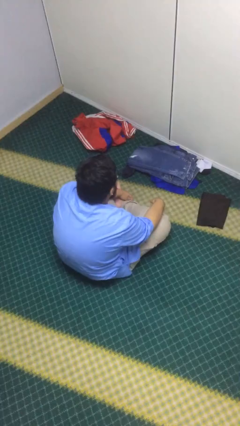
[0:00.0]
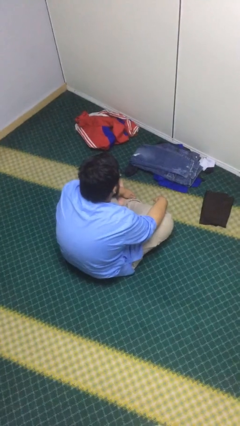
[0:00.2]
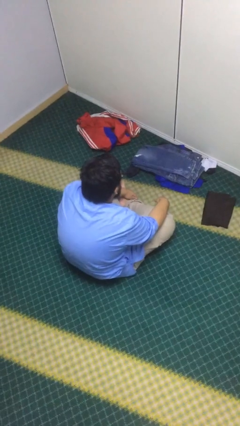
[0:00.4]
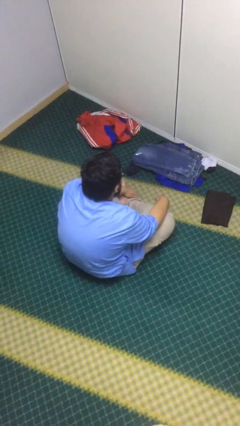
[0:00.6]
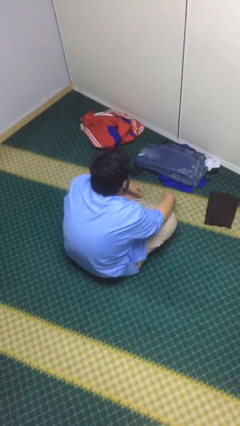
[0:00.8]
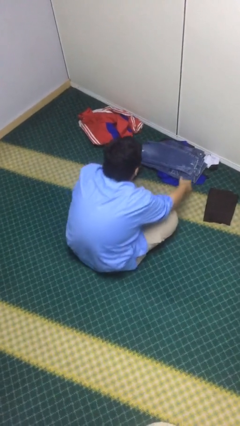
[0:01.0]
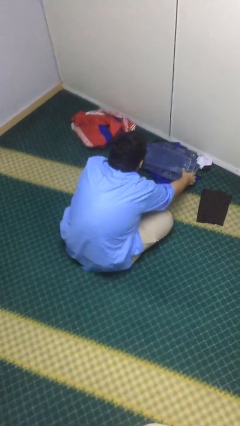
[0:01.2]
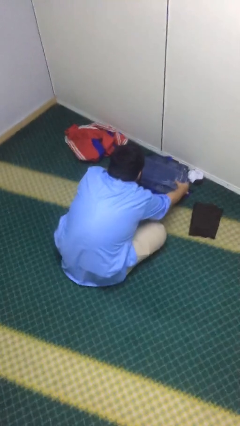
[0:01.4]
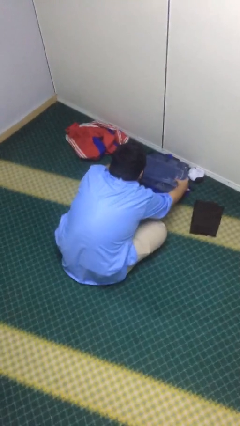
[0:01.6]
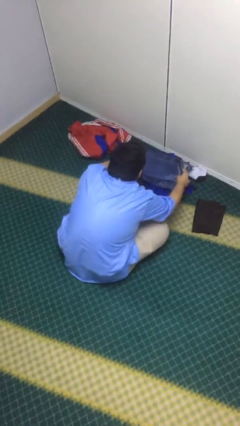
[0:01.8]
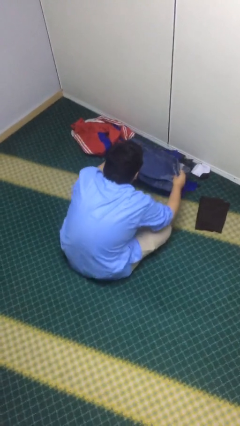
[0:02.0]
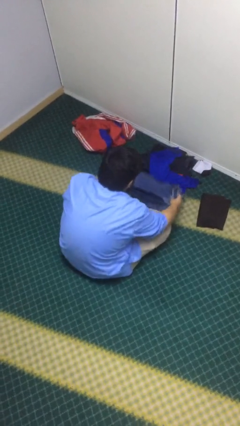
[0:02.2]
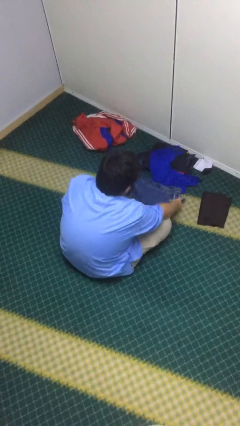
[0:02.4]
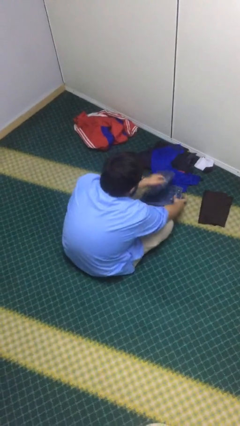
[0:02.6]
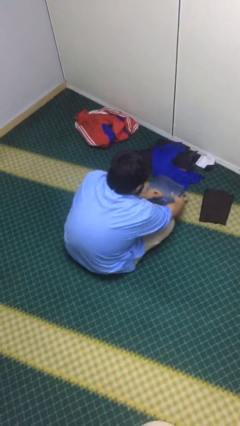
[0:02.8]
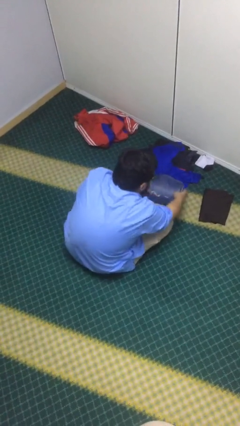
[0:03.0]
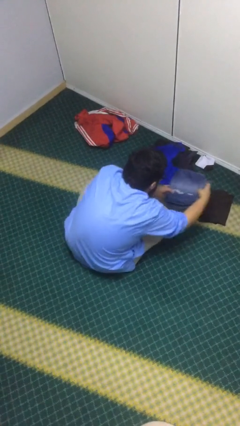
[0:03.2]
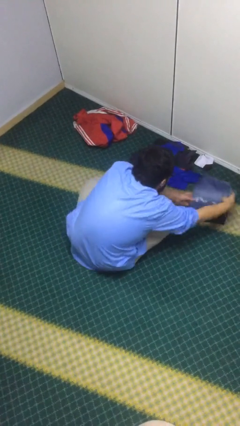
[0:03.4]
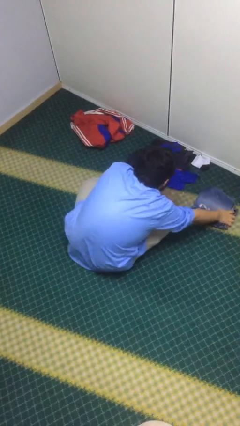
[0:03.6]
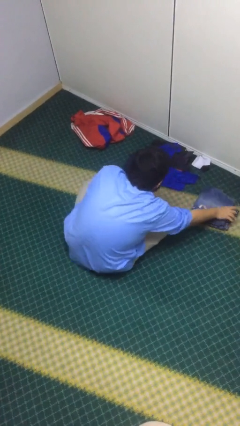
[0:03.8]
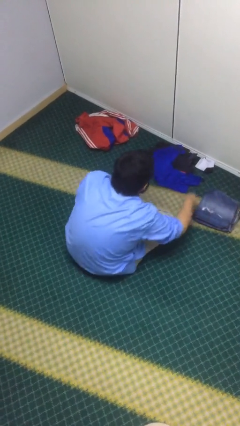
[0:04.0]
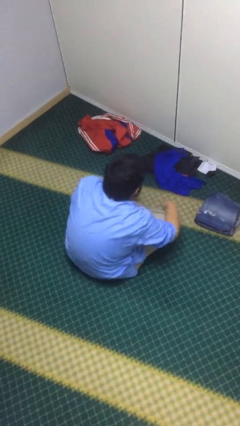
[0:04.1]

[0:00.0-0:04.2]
person folds pants

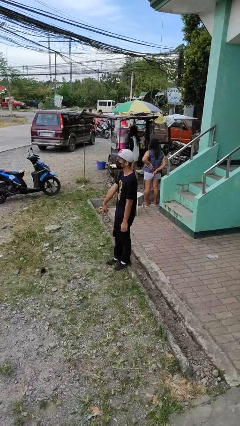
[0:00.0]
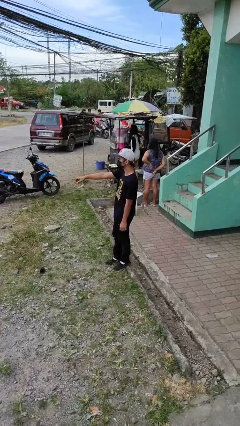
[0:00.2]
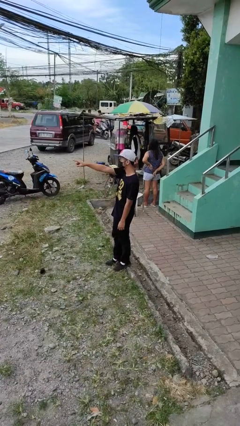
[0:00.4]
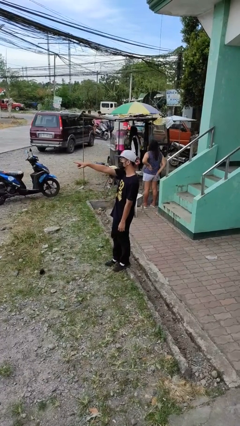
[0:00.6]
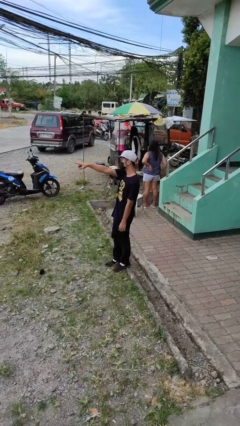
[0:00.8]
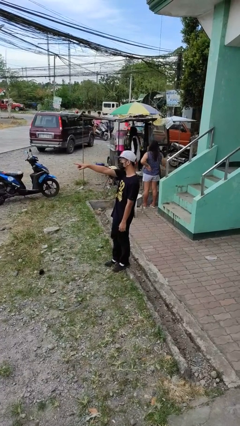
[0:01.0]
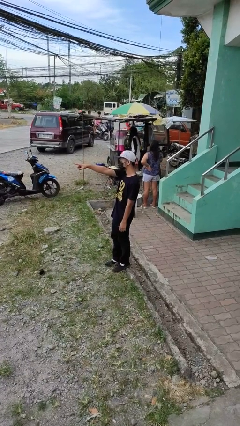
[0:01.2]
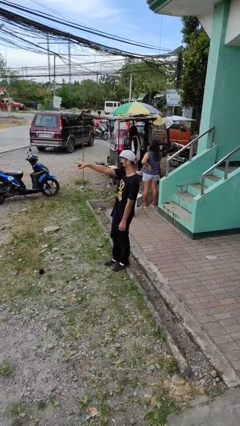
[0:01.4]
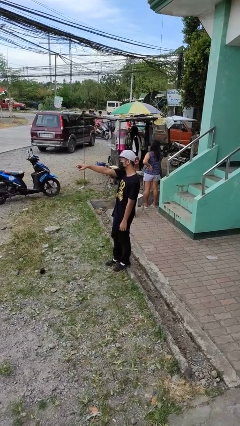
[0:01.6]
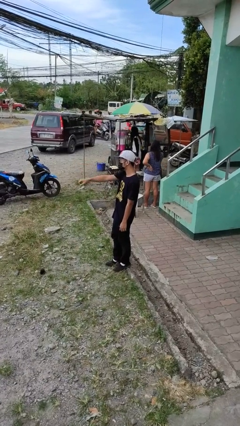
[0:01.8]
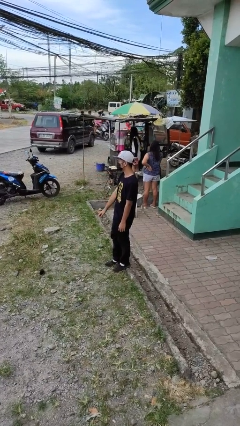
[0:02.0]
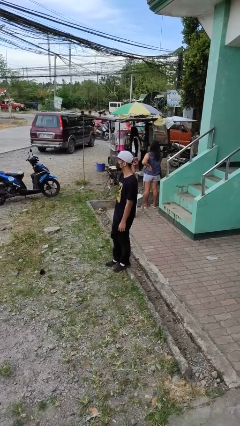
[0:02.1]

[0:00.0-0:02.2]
person points at person

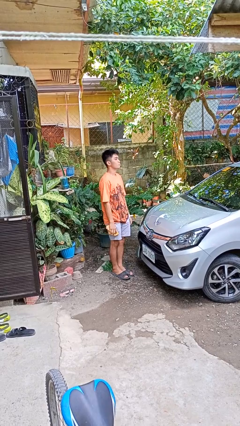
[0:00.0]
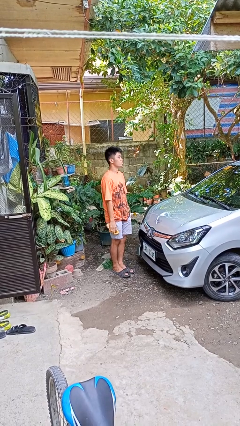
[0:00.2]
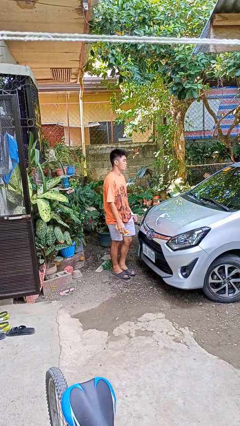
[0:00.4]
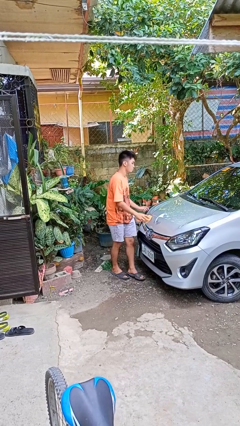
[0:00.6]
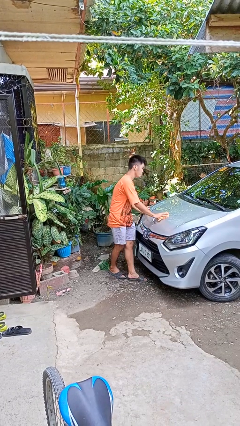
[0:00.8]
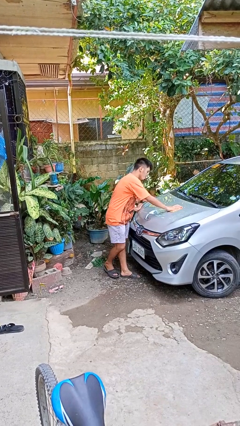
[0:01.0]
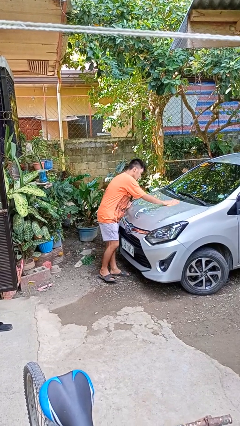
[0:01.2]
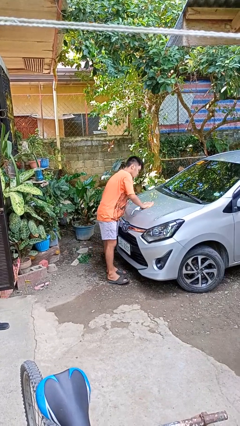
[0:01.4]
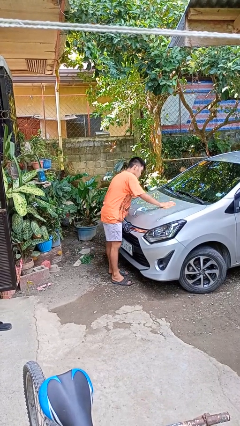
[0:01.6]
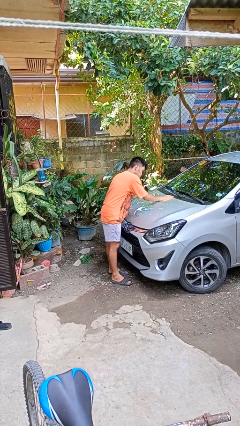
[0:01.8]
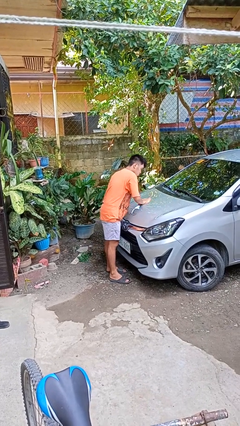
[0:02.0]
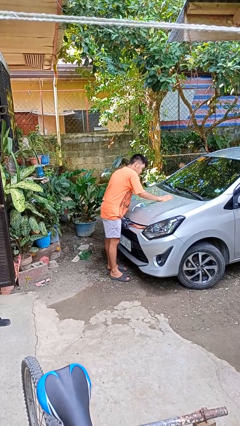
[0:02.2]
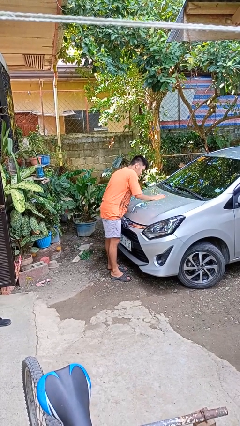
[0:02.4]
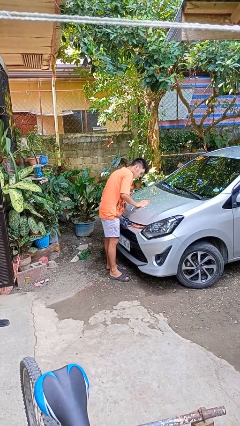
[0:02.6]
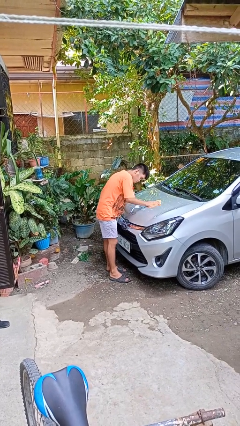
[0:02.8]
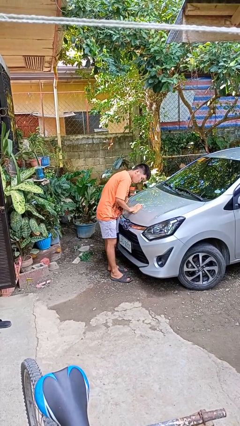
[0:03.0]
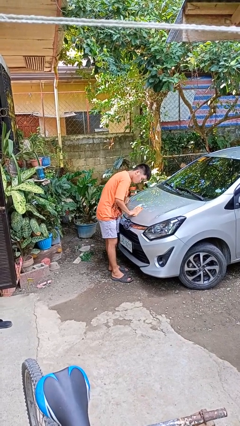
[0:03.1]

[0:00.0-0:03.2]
person polishes car with rag

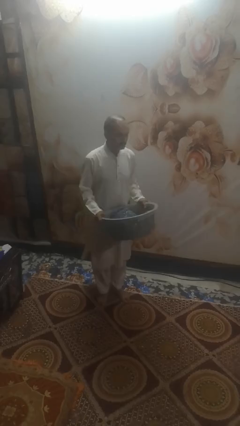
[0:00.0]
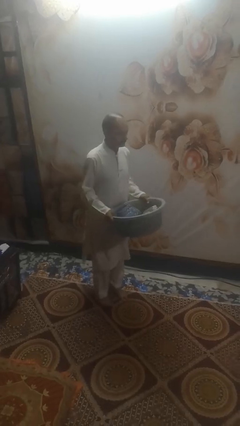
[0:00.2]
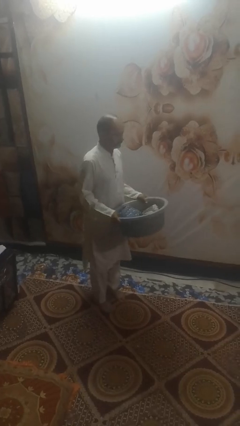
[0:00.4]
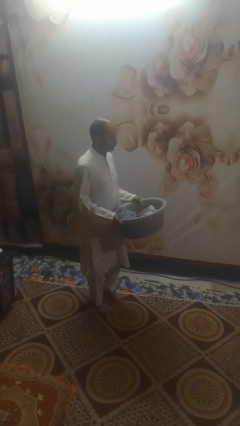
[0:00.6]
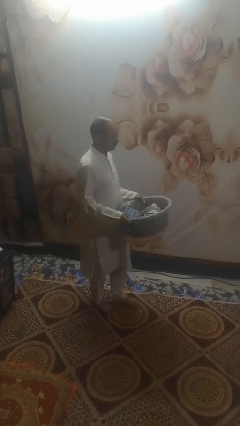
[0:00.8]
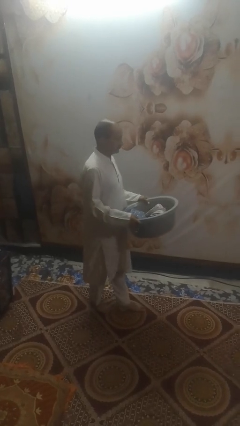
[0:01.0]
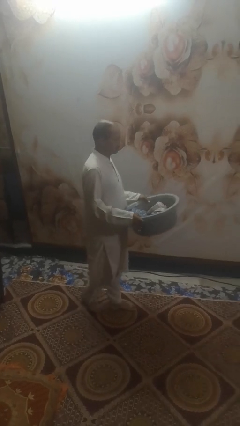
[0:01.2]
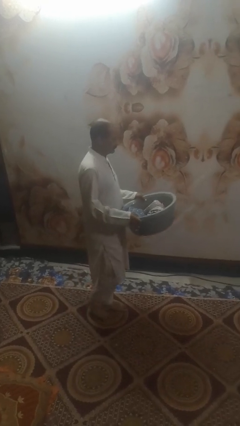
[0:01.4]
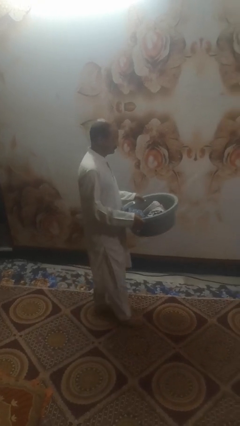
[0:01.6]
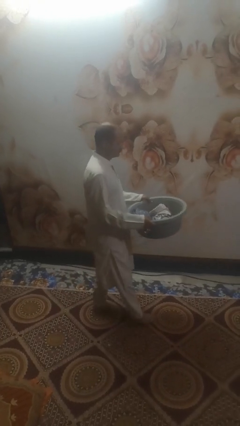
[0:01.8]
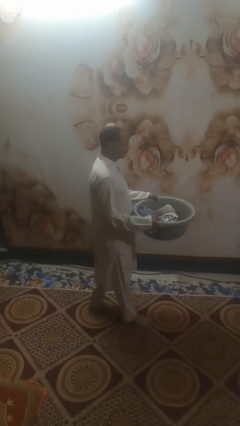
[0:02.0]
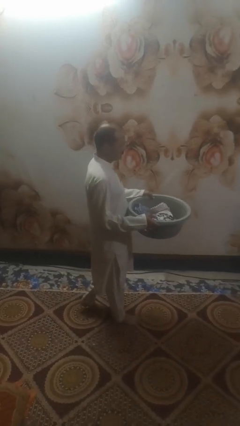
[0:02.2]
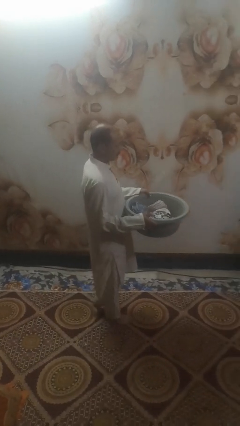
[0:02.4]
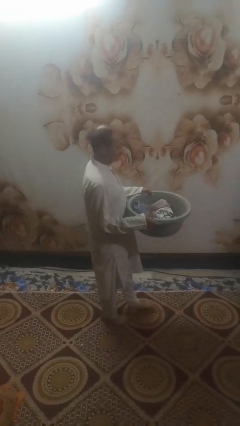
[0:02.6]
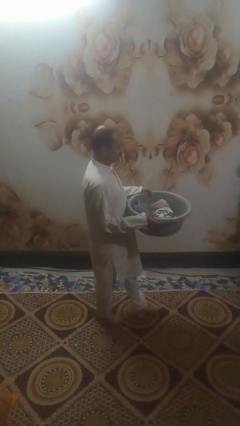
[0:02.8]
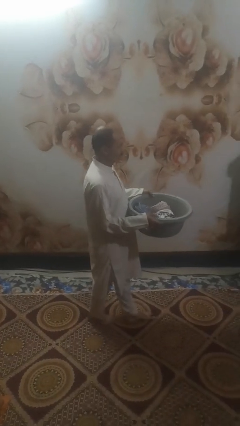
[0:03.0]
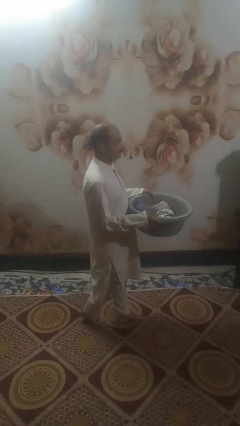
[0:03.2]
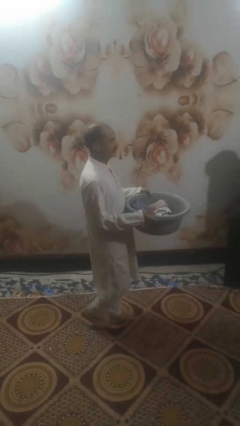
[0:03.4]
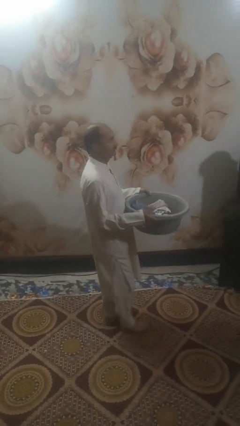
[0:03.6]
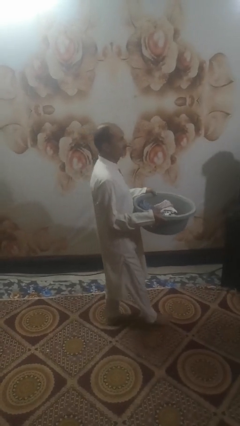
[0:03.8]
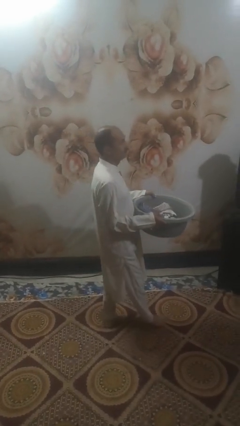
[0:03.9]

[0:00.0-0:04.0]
person carries laundry basket

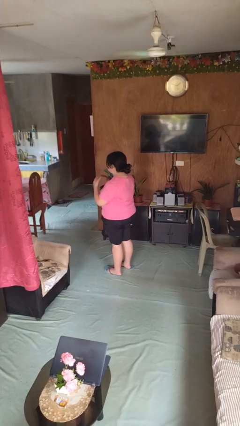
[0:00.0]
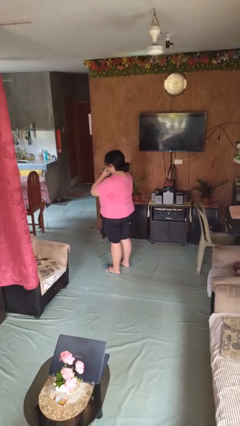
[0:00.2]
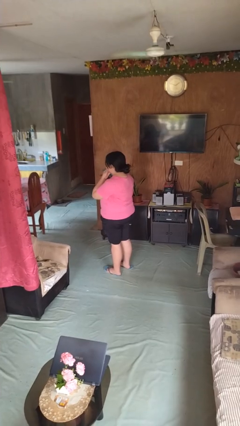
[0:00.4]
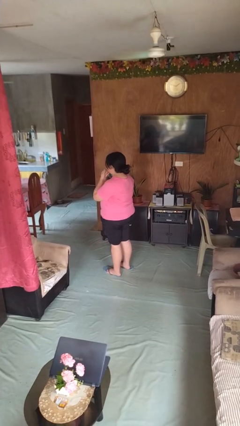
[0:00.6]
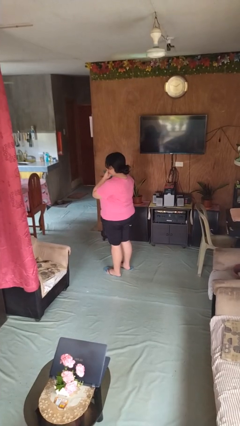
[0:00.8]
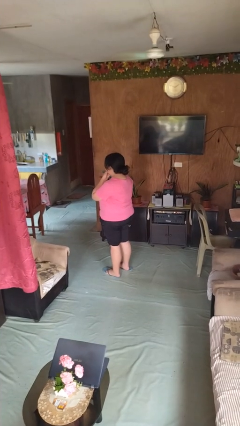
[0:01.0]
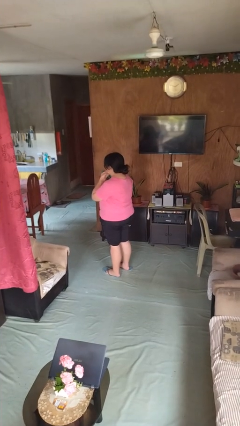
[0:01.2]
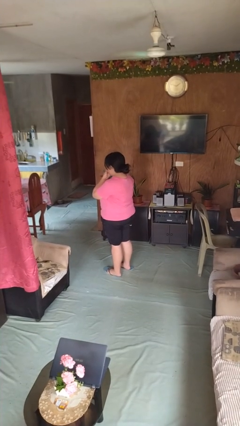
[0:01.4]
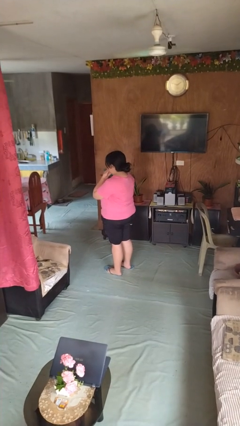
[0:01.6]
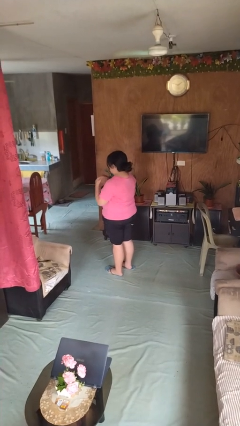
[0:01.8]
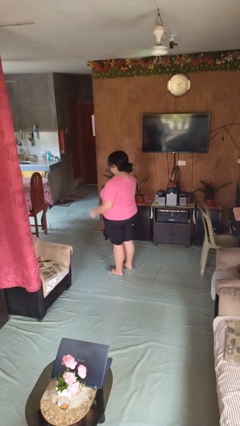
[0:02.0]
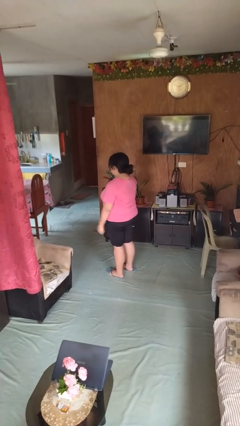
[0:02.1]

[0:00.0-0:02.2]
person strokes chin

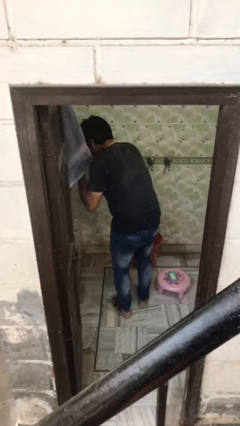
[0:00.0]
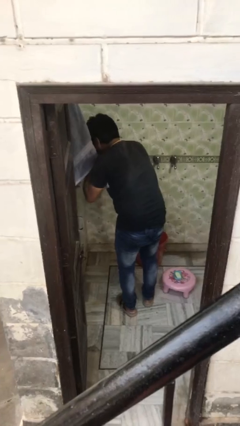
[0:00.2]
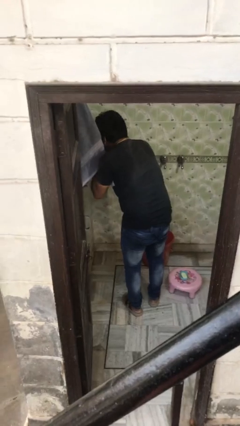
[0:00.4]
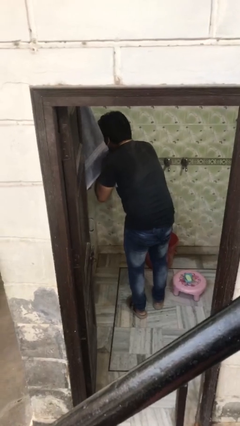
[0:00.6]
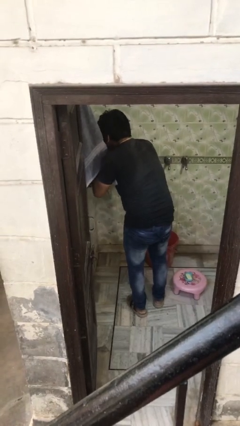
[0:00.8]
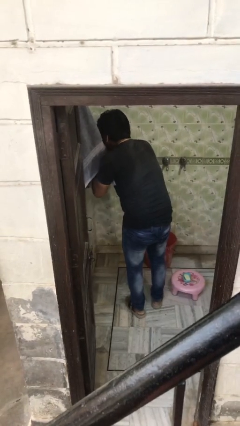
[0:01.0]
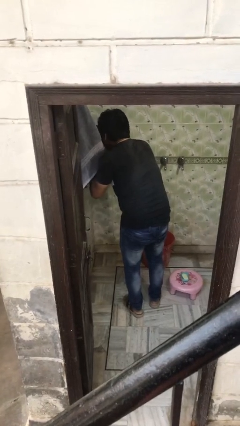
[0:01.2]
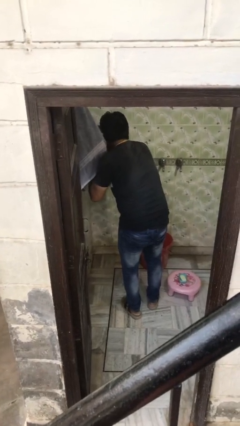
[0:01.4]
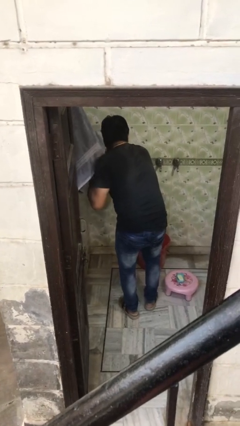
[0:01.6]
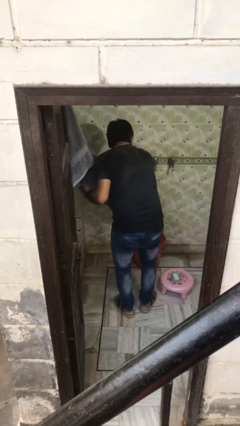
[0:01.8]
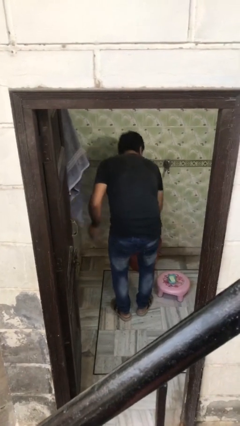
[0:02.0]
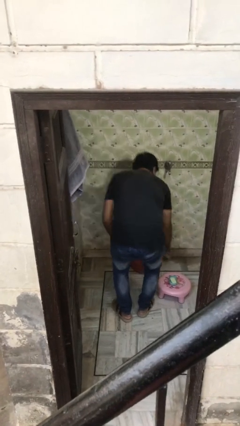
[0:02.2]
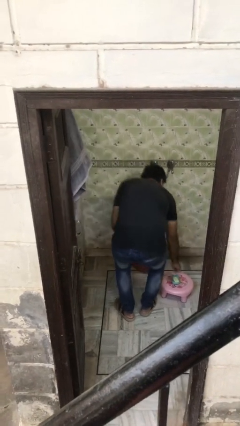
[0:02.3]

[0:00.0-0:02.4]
person dries face with towel
